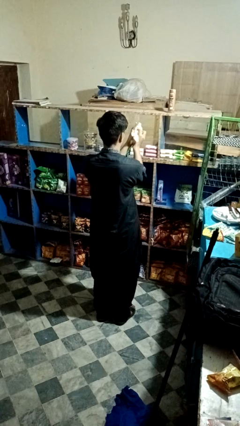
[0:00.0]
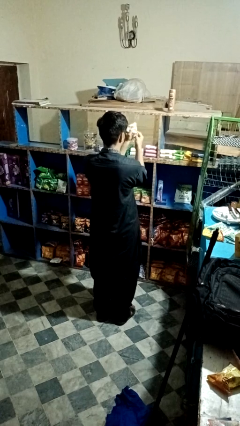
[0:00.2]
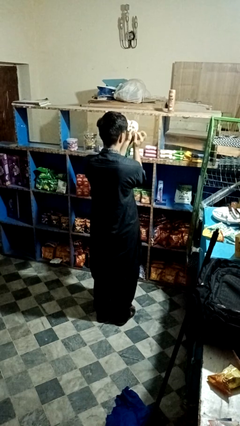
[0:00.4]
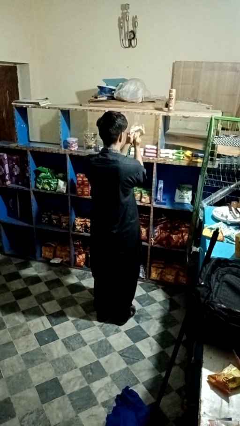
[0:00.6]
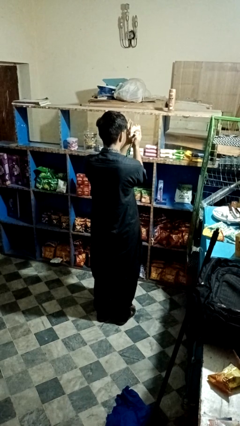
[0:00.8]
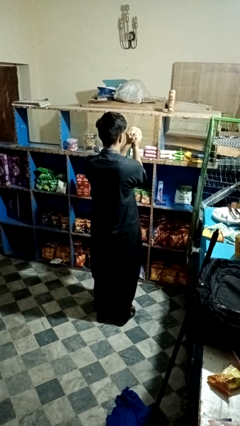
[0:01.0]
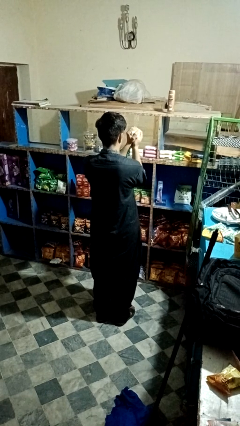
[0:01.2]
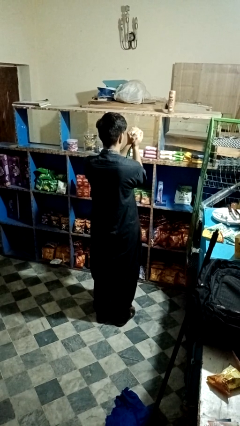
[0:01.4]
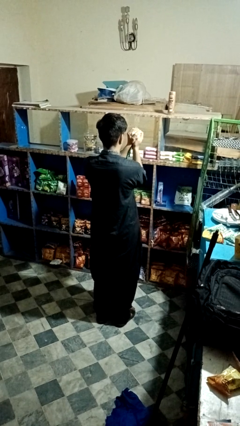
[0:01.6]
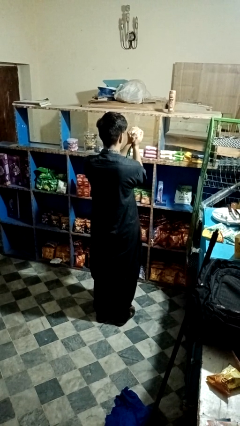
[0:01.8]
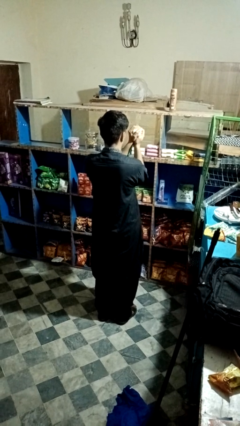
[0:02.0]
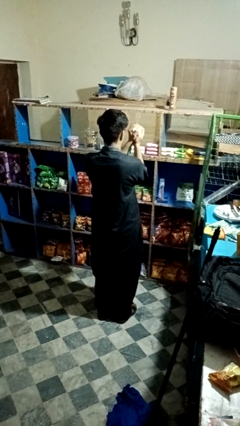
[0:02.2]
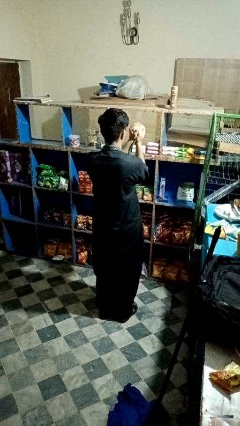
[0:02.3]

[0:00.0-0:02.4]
person crumples paper

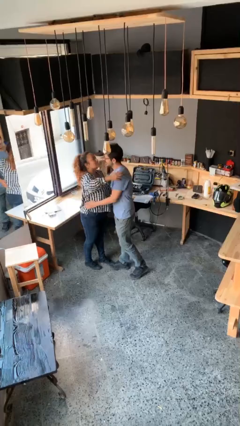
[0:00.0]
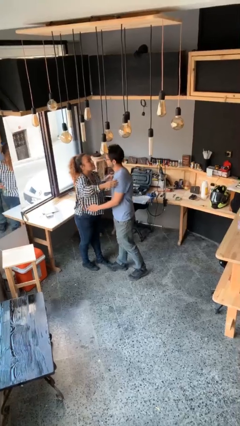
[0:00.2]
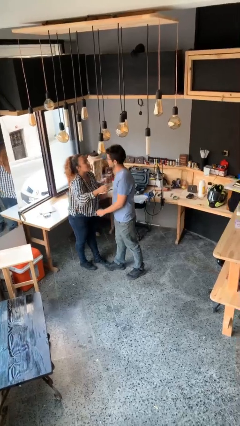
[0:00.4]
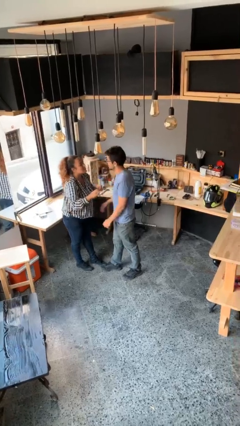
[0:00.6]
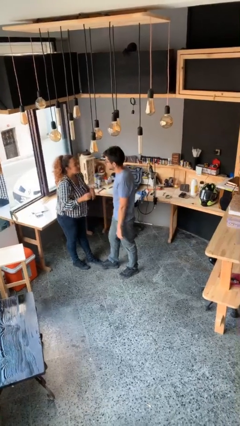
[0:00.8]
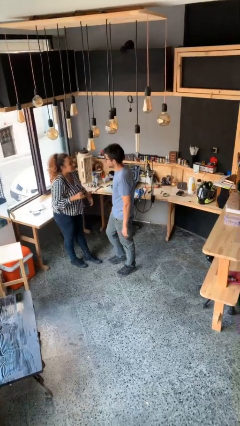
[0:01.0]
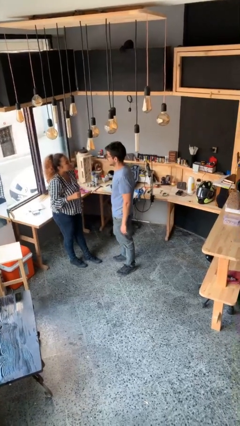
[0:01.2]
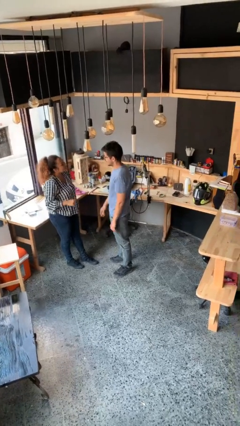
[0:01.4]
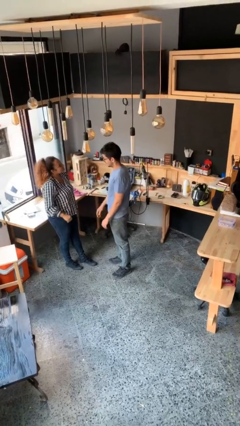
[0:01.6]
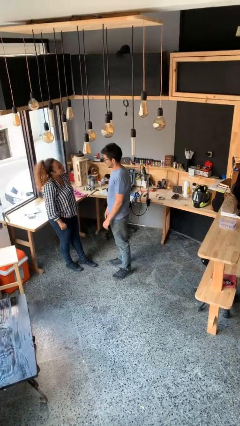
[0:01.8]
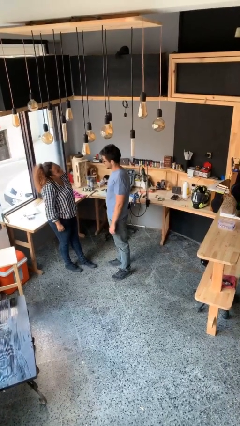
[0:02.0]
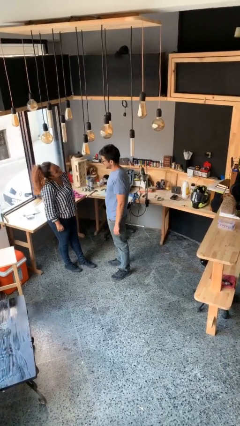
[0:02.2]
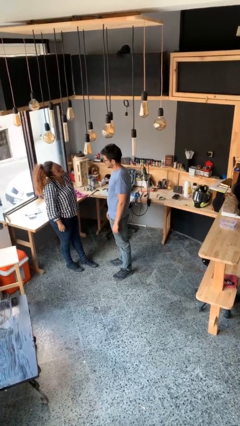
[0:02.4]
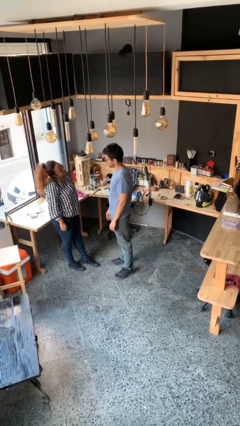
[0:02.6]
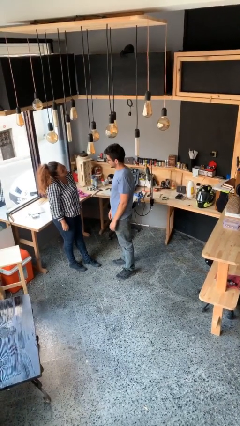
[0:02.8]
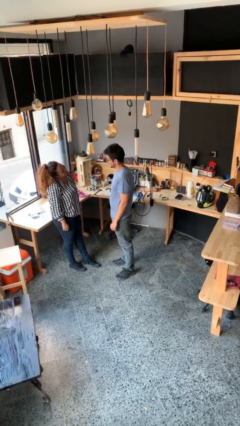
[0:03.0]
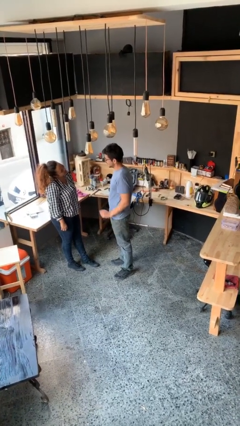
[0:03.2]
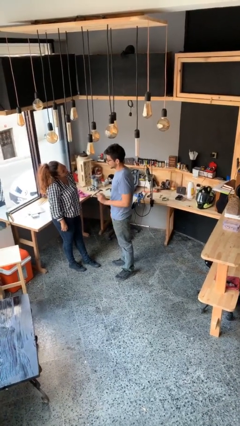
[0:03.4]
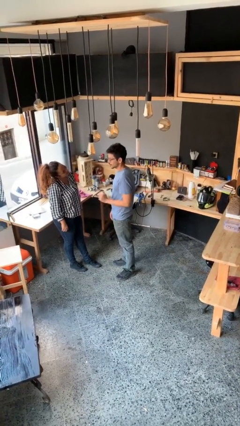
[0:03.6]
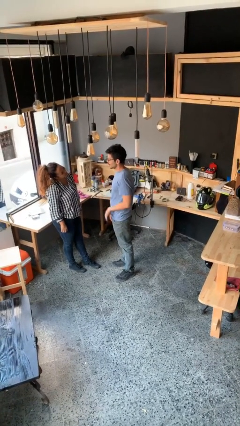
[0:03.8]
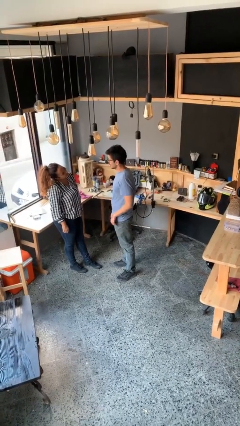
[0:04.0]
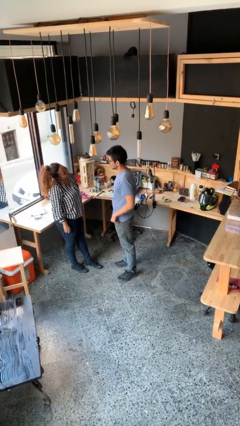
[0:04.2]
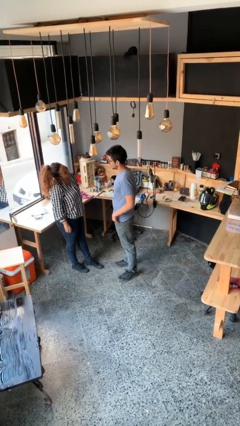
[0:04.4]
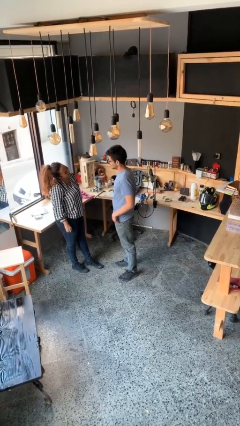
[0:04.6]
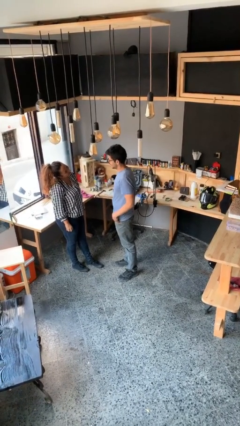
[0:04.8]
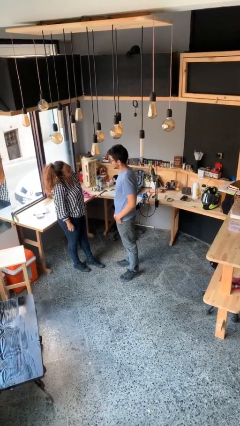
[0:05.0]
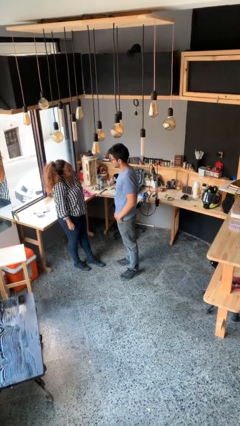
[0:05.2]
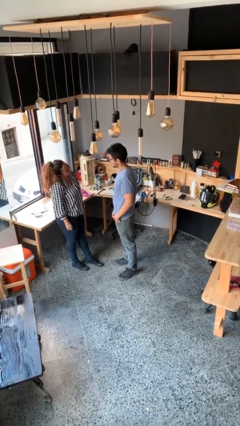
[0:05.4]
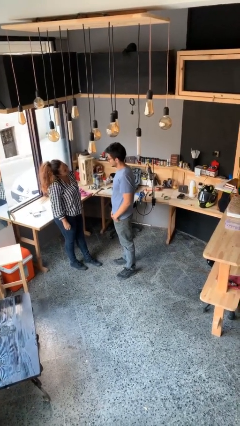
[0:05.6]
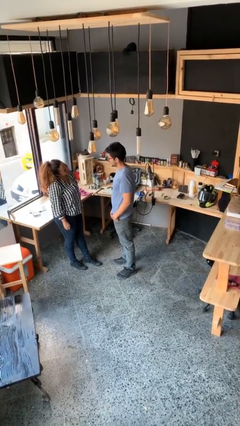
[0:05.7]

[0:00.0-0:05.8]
person talks to person

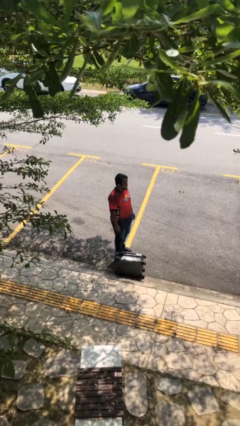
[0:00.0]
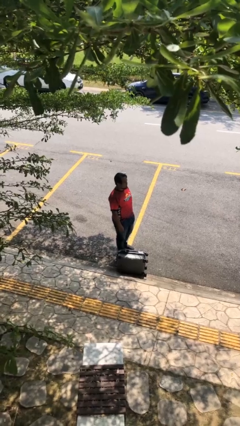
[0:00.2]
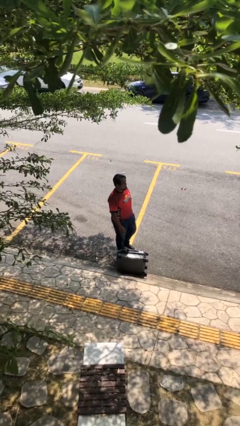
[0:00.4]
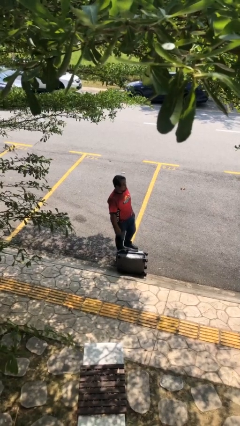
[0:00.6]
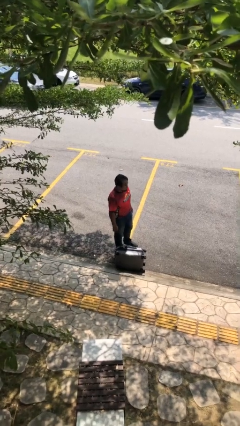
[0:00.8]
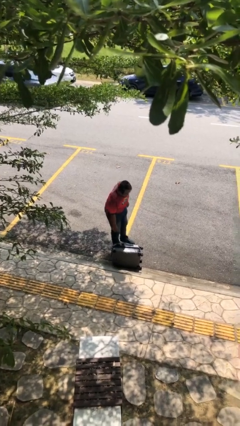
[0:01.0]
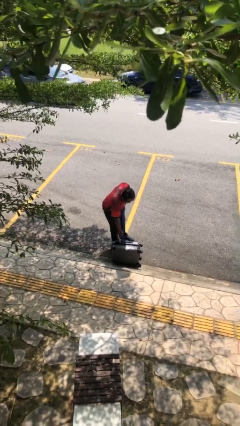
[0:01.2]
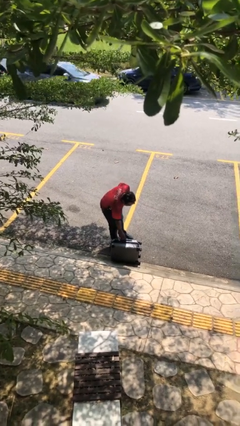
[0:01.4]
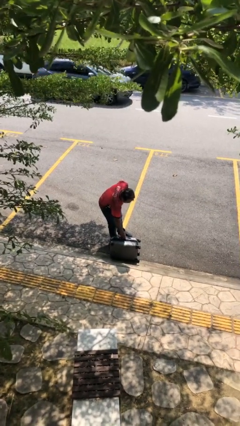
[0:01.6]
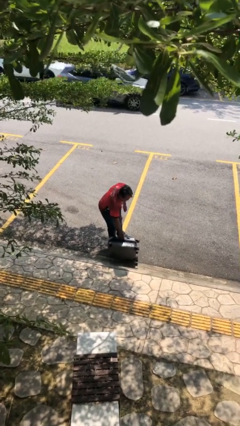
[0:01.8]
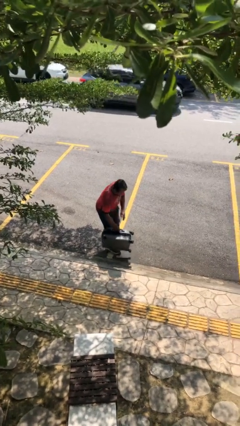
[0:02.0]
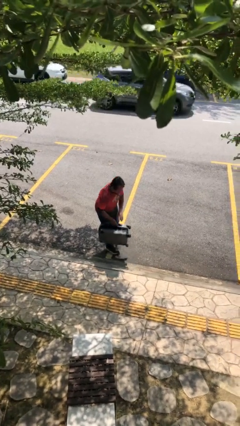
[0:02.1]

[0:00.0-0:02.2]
person picks up object from floor

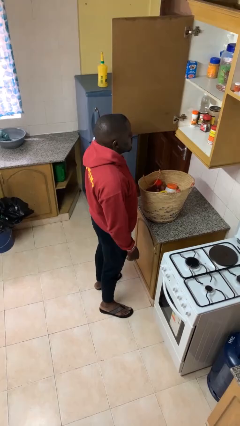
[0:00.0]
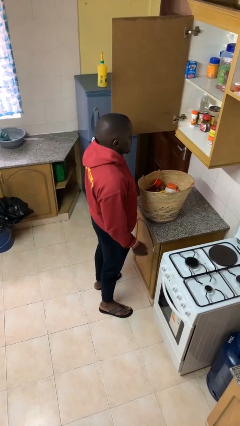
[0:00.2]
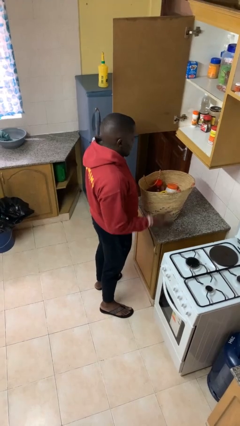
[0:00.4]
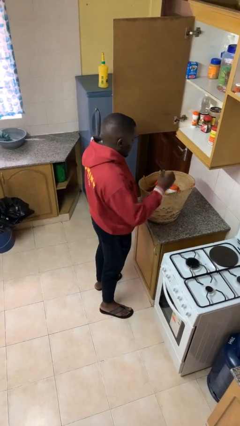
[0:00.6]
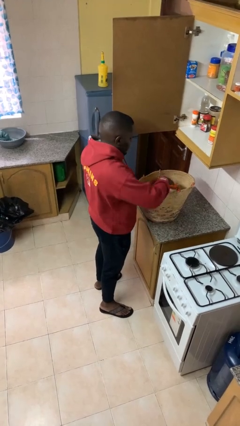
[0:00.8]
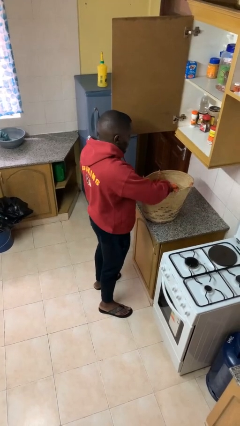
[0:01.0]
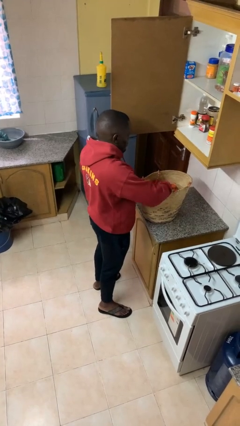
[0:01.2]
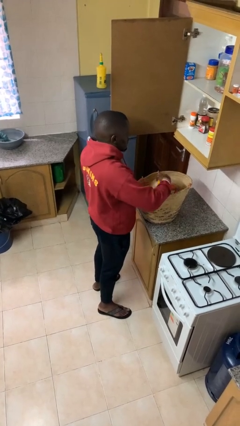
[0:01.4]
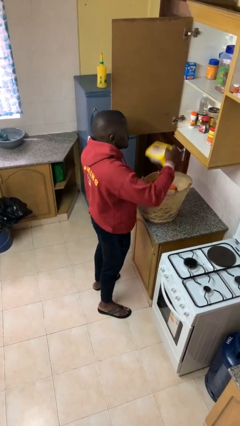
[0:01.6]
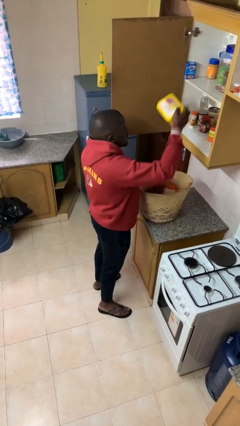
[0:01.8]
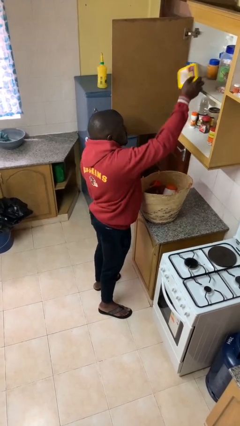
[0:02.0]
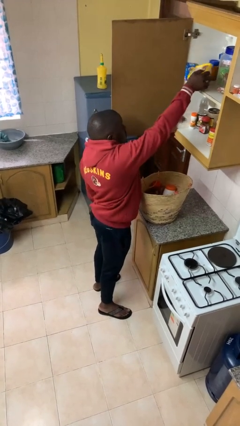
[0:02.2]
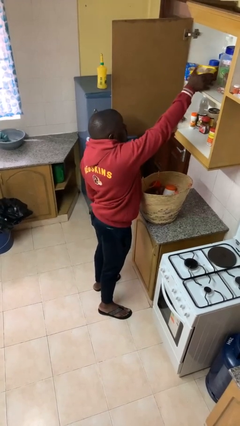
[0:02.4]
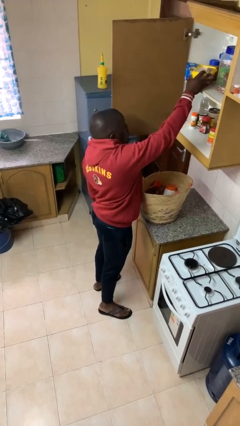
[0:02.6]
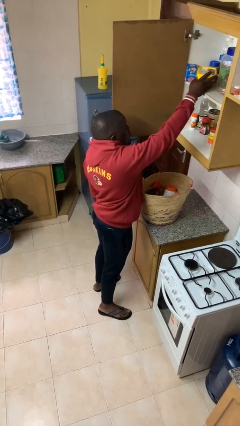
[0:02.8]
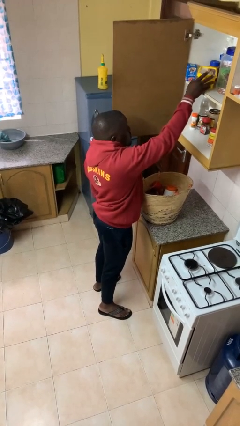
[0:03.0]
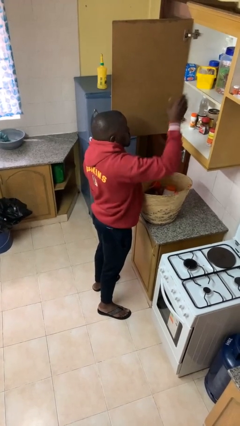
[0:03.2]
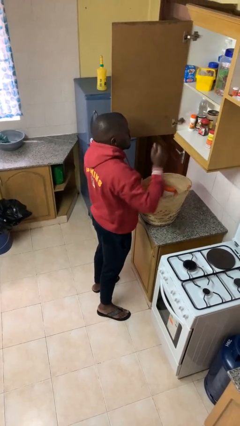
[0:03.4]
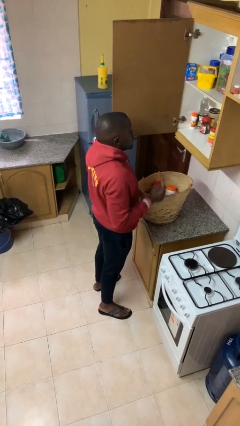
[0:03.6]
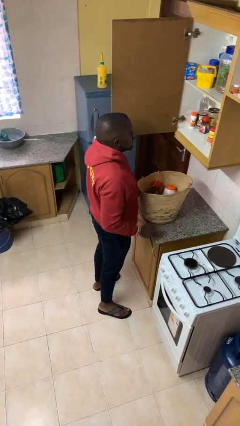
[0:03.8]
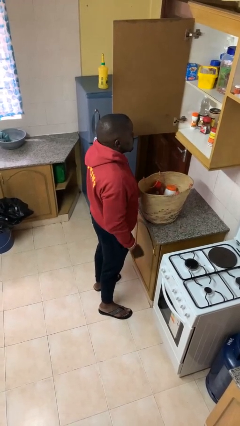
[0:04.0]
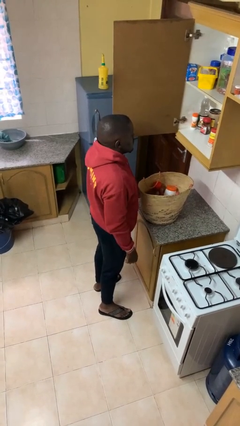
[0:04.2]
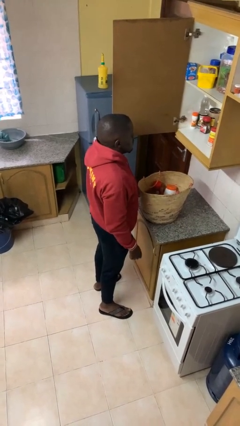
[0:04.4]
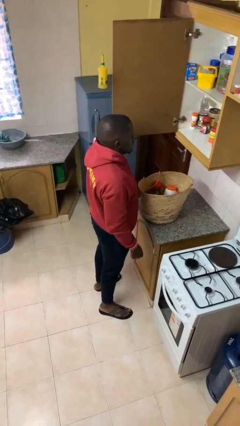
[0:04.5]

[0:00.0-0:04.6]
person loads groceries into cabinet

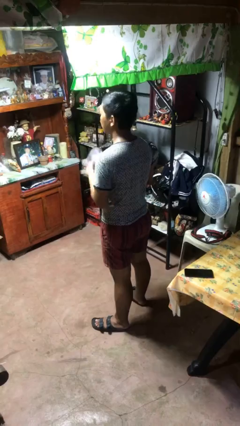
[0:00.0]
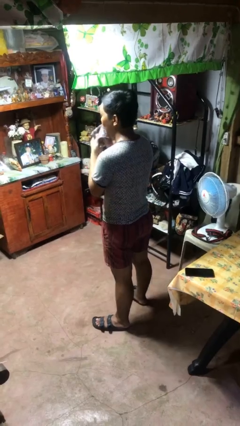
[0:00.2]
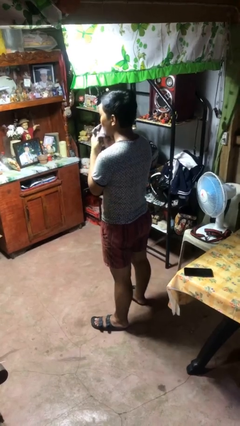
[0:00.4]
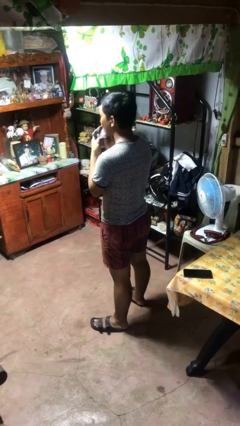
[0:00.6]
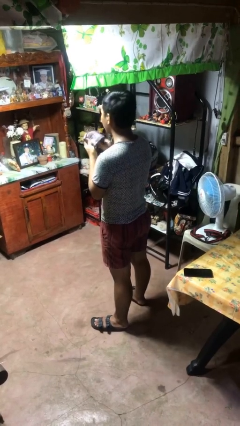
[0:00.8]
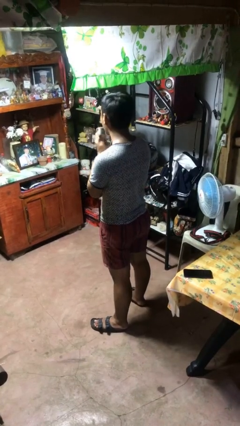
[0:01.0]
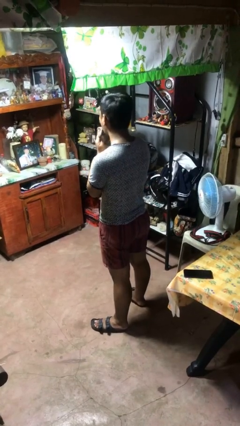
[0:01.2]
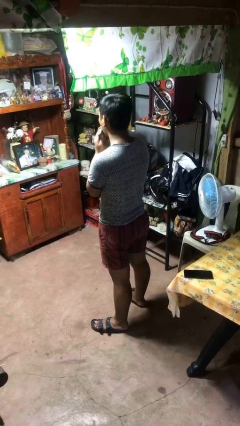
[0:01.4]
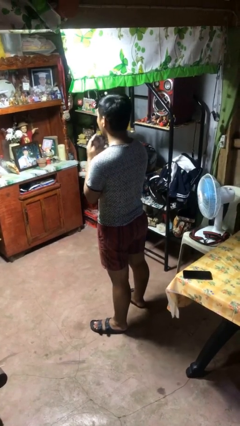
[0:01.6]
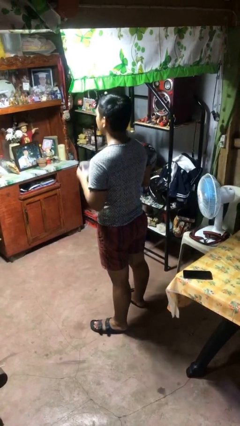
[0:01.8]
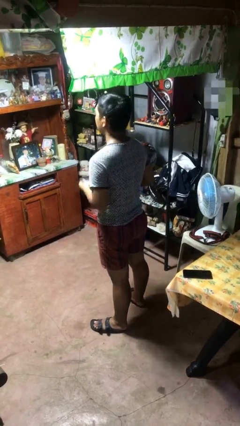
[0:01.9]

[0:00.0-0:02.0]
person wipes mouth with napkin

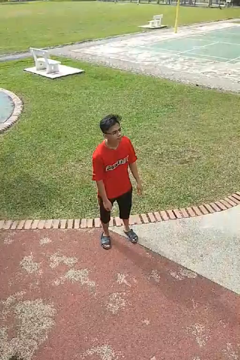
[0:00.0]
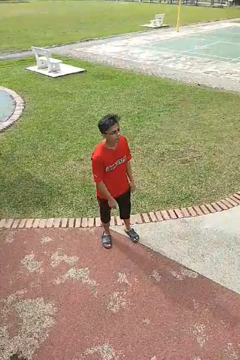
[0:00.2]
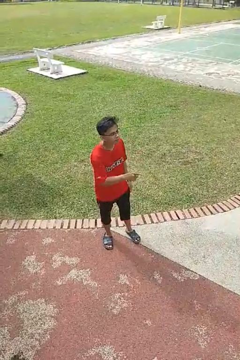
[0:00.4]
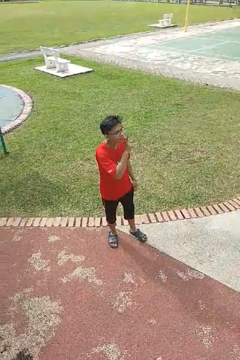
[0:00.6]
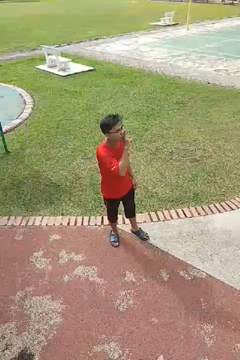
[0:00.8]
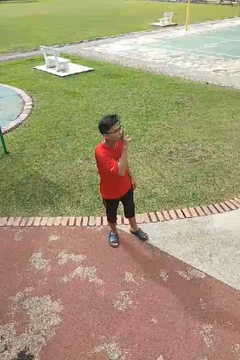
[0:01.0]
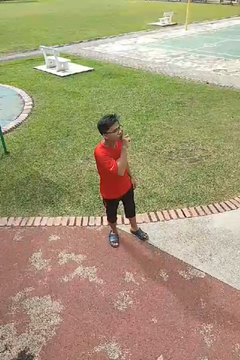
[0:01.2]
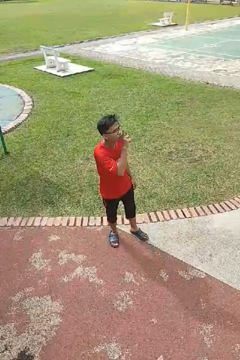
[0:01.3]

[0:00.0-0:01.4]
person gestures be quiet
